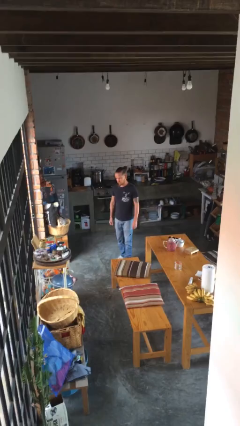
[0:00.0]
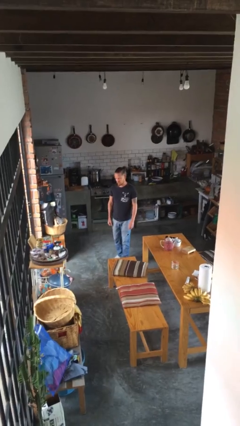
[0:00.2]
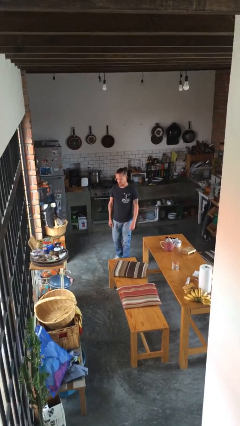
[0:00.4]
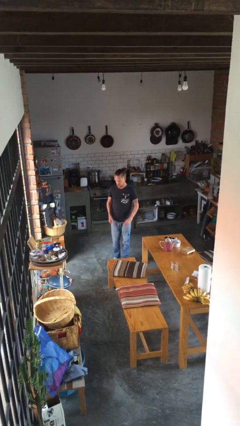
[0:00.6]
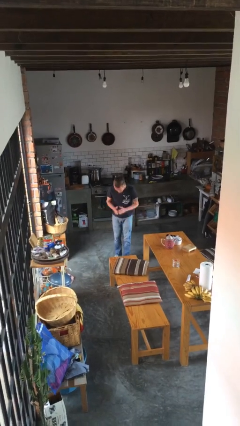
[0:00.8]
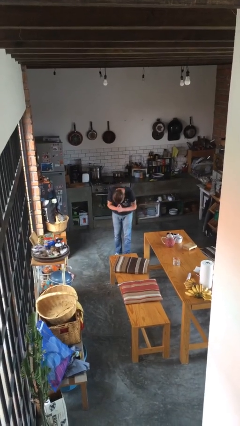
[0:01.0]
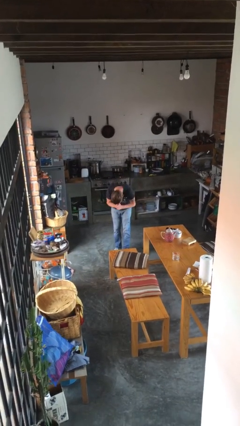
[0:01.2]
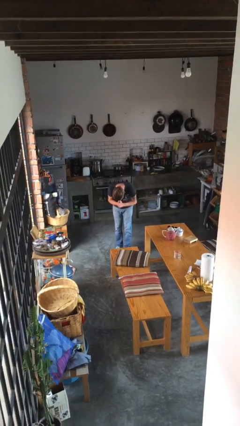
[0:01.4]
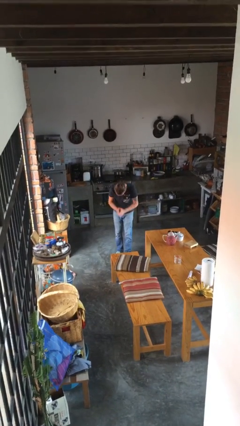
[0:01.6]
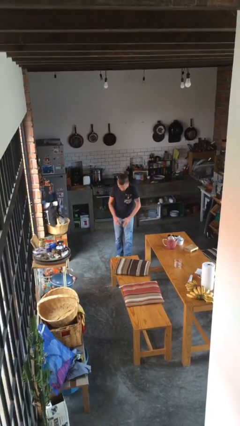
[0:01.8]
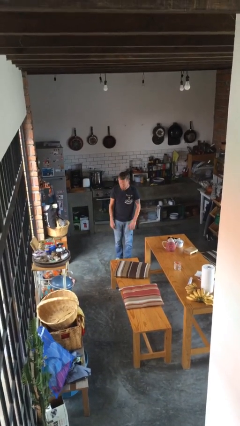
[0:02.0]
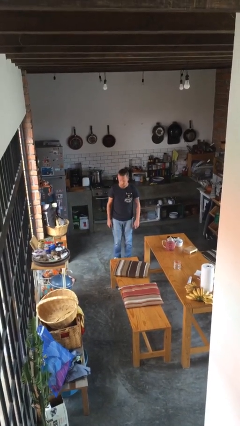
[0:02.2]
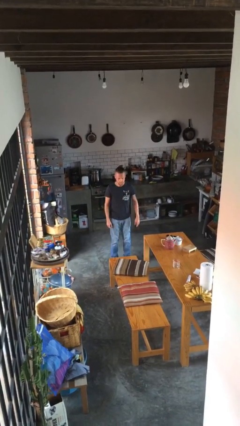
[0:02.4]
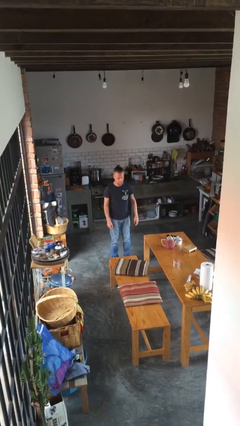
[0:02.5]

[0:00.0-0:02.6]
person bows

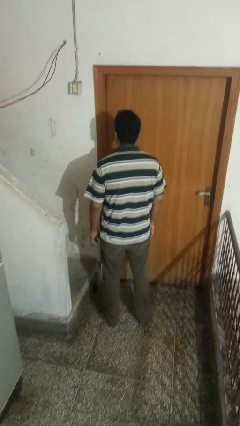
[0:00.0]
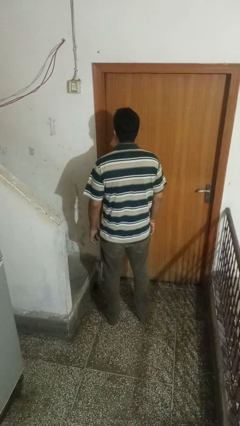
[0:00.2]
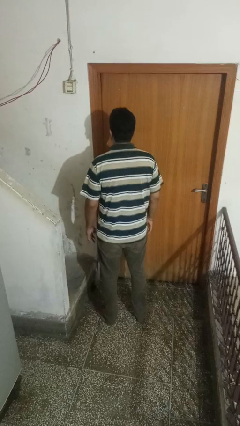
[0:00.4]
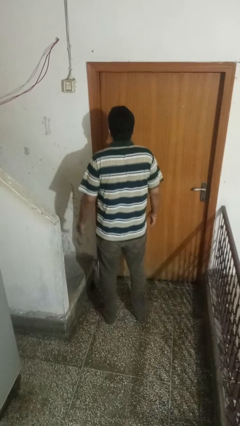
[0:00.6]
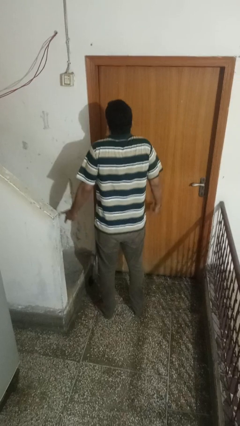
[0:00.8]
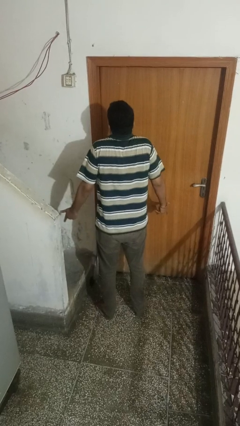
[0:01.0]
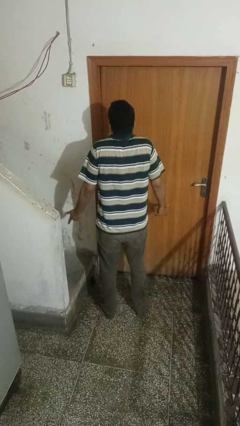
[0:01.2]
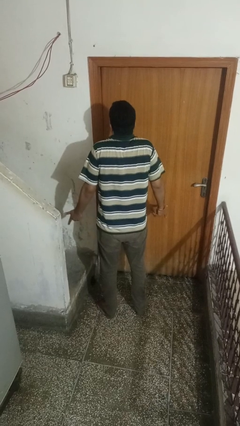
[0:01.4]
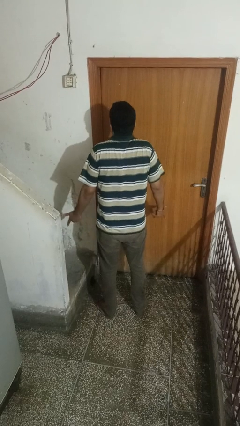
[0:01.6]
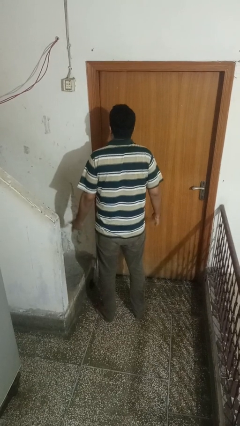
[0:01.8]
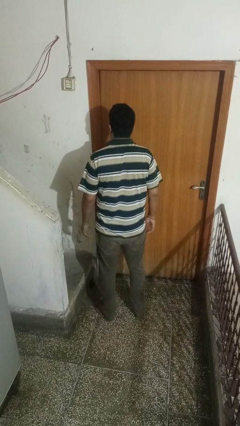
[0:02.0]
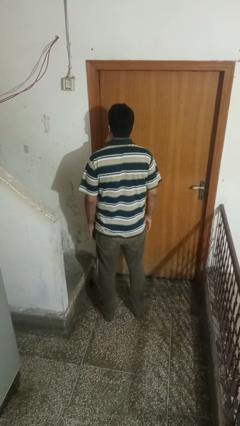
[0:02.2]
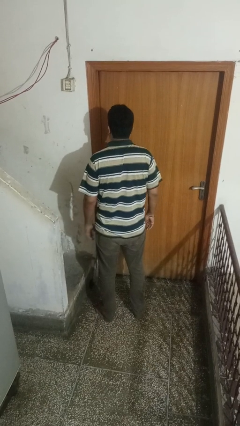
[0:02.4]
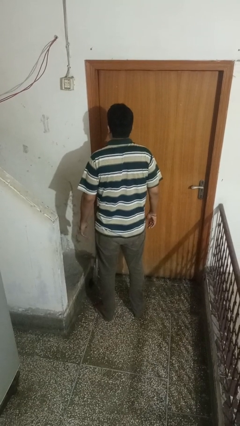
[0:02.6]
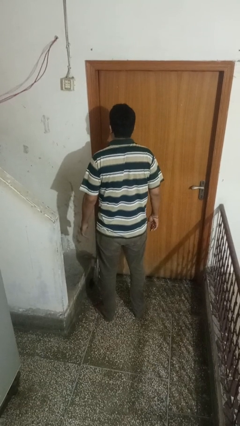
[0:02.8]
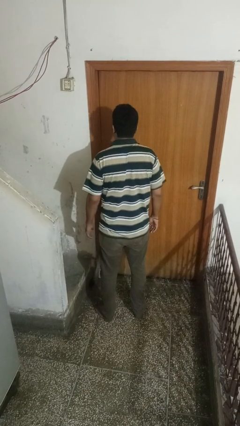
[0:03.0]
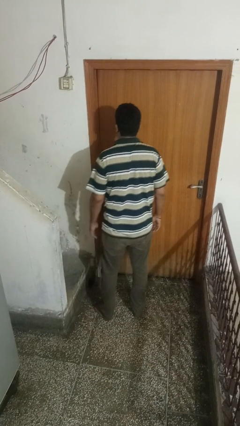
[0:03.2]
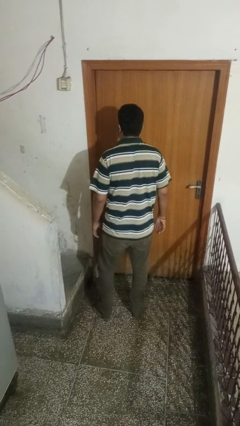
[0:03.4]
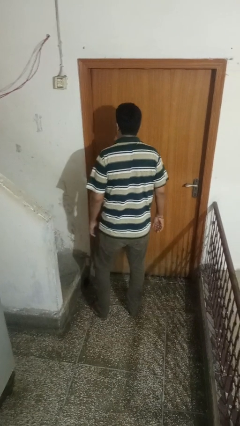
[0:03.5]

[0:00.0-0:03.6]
person shrugs

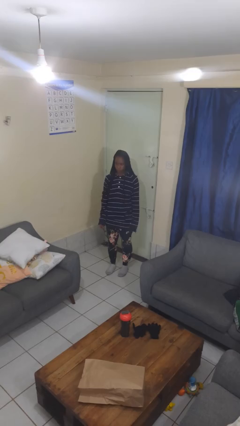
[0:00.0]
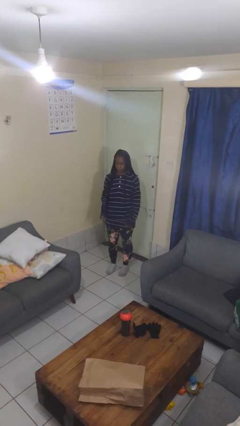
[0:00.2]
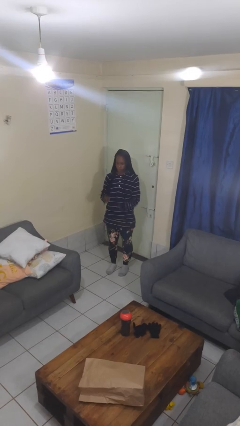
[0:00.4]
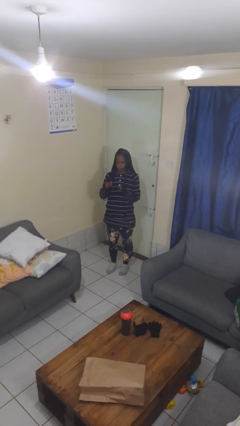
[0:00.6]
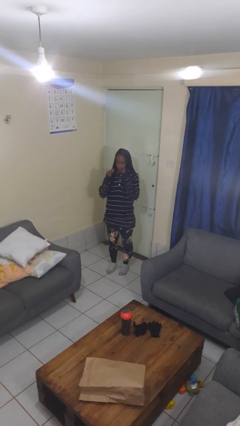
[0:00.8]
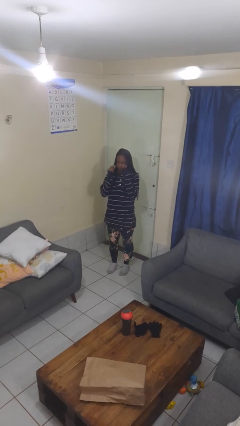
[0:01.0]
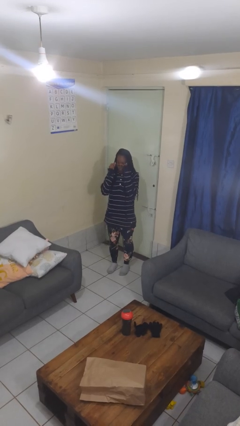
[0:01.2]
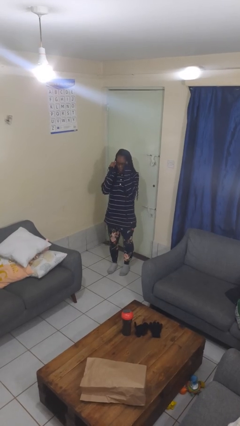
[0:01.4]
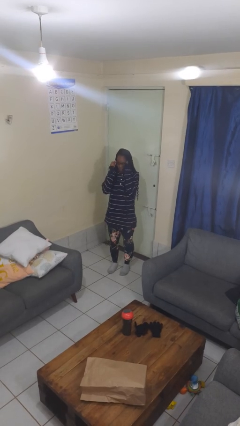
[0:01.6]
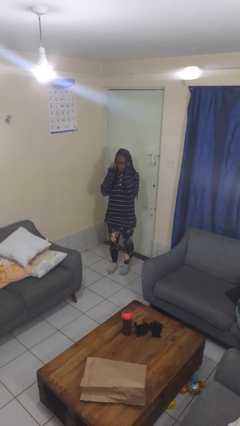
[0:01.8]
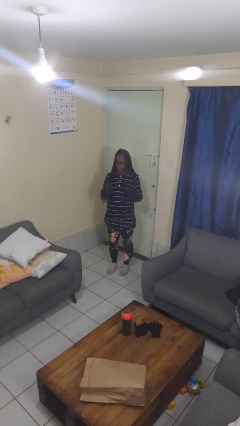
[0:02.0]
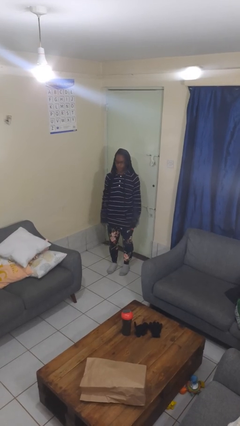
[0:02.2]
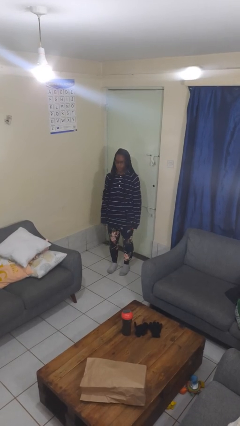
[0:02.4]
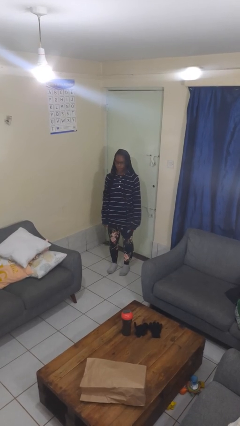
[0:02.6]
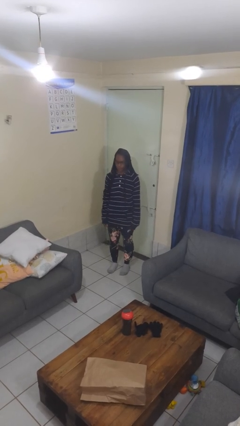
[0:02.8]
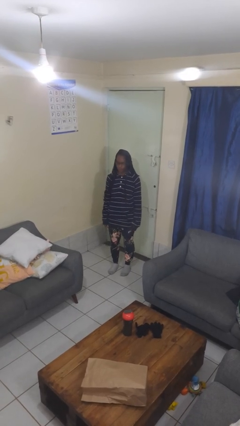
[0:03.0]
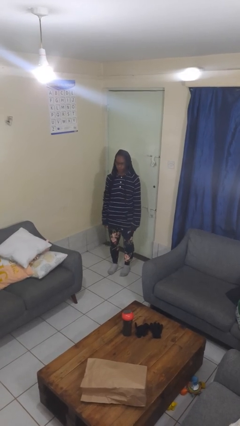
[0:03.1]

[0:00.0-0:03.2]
person puts on glasses

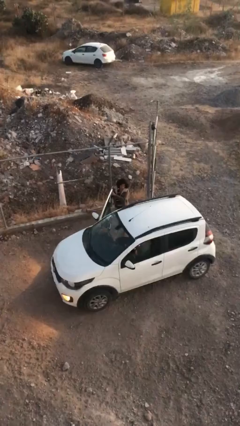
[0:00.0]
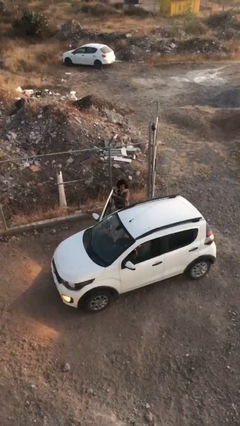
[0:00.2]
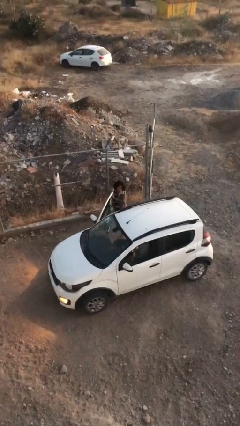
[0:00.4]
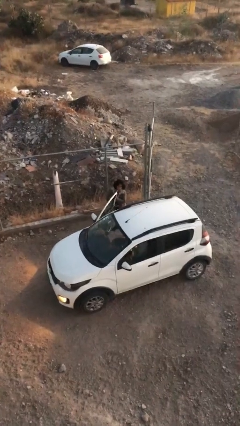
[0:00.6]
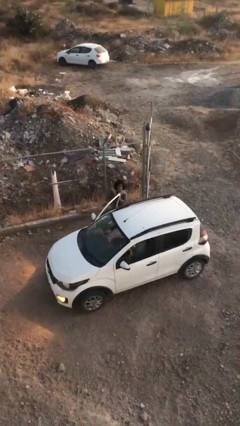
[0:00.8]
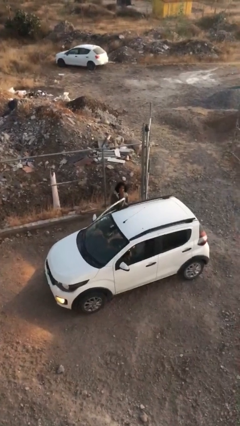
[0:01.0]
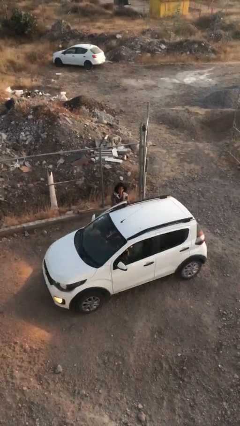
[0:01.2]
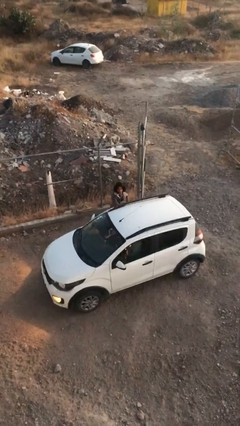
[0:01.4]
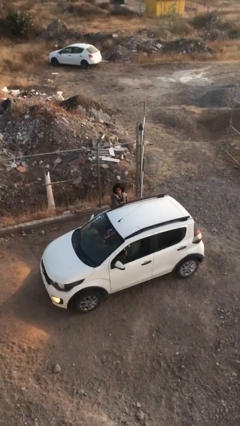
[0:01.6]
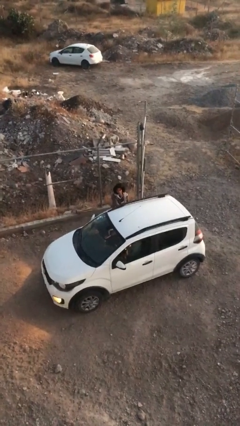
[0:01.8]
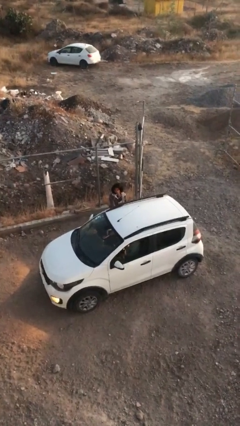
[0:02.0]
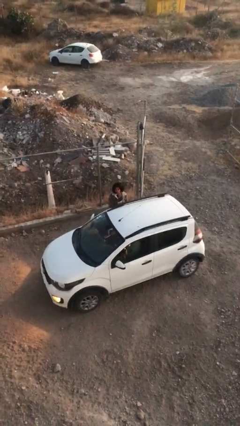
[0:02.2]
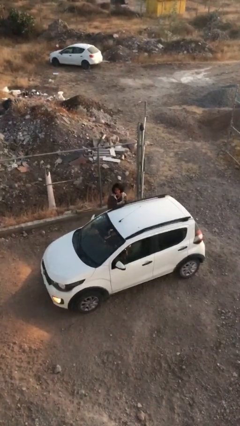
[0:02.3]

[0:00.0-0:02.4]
person closes car door

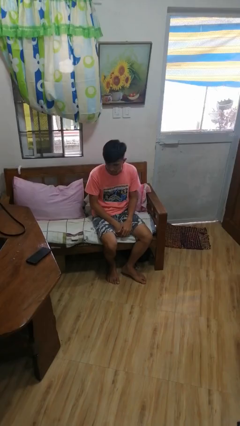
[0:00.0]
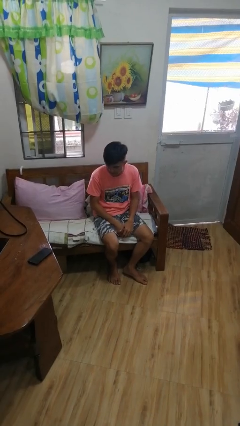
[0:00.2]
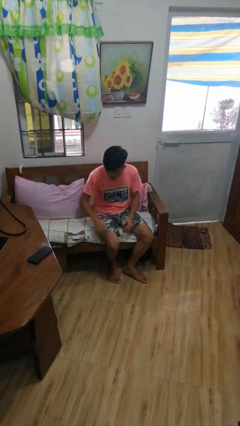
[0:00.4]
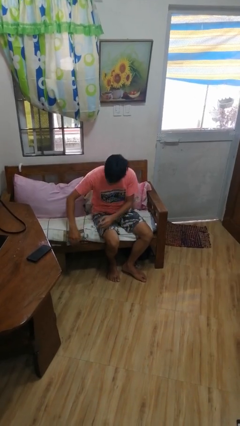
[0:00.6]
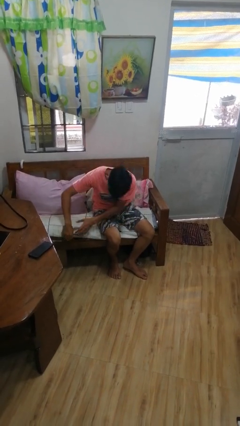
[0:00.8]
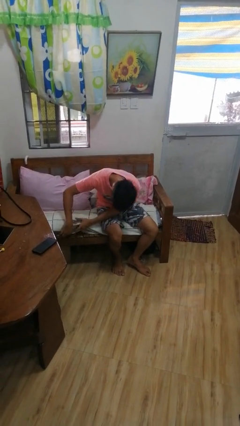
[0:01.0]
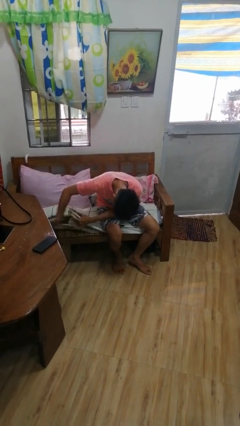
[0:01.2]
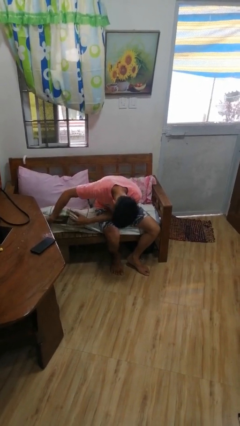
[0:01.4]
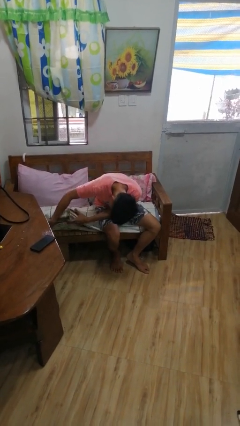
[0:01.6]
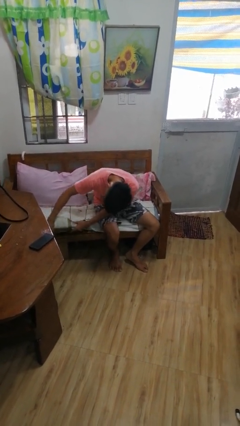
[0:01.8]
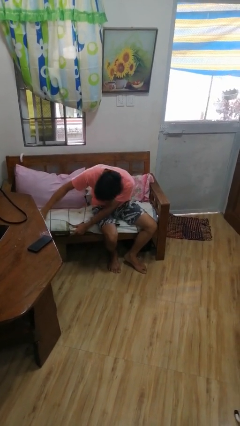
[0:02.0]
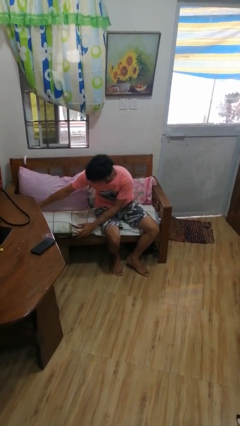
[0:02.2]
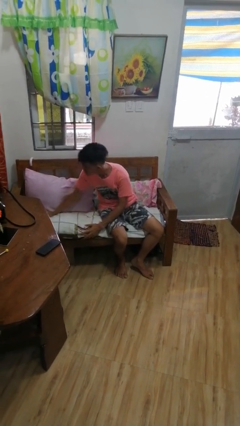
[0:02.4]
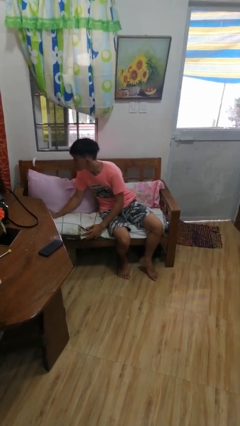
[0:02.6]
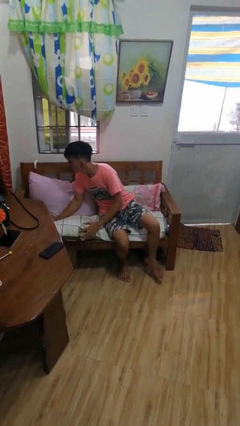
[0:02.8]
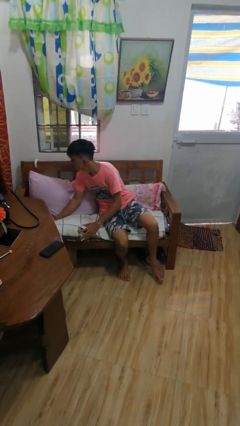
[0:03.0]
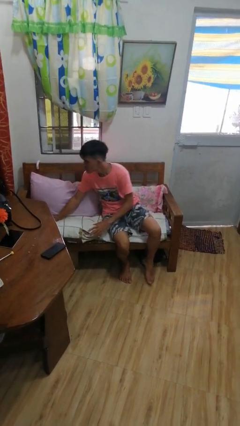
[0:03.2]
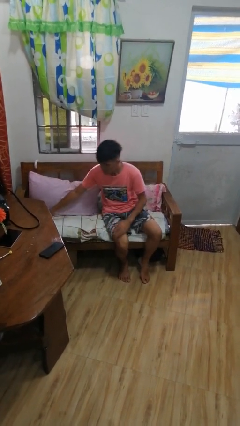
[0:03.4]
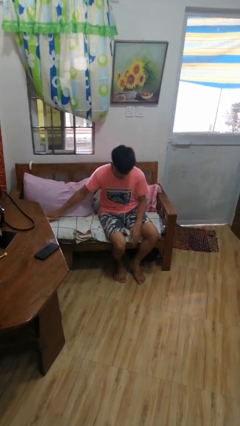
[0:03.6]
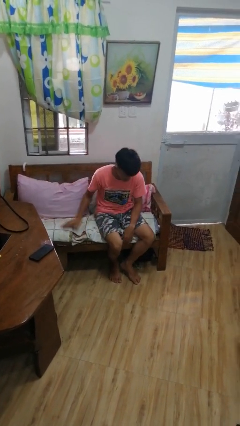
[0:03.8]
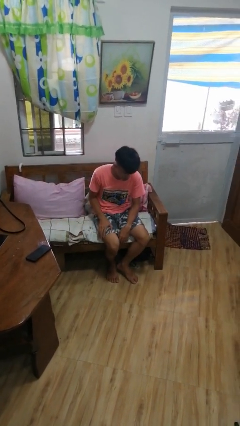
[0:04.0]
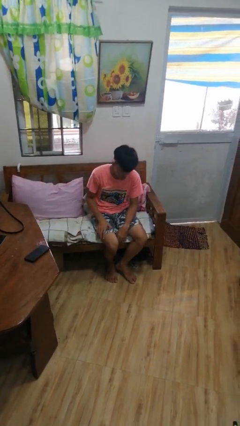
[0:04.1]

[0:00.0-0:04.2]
person searches in couch

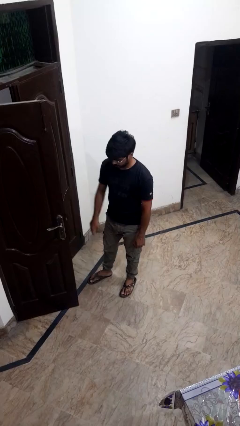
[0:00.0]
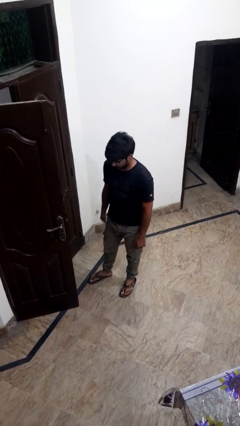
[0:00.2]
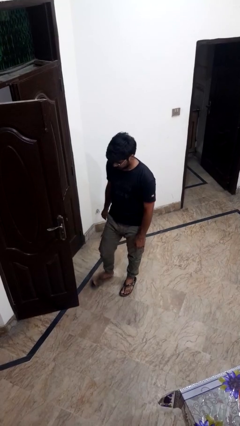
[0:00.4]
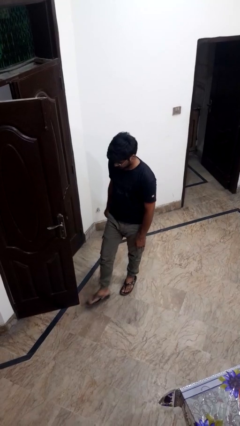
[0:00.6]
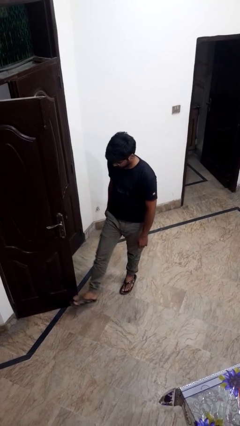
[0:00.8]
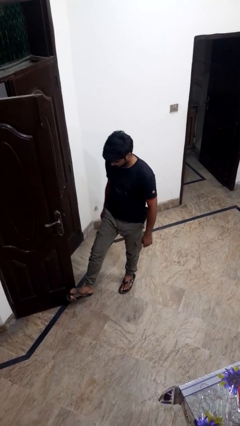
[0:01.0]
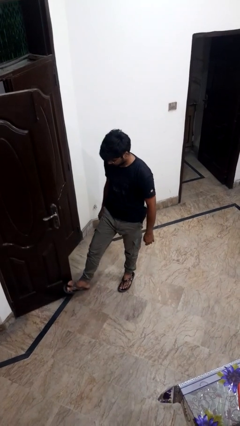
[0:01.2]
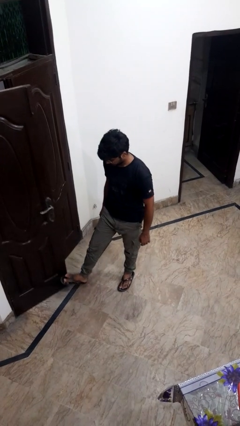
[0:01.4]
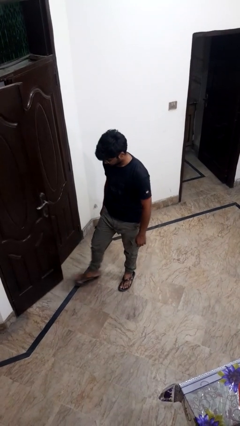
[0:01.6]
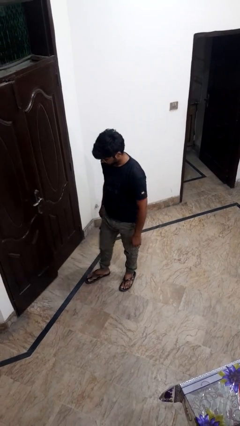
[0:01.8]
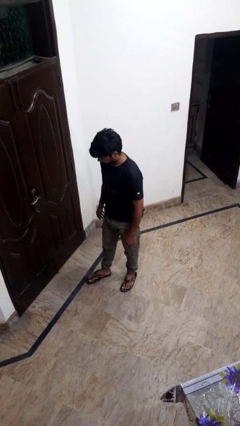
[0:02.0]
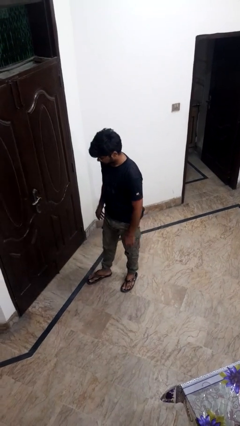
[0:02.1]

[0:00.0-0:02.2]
person closes door with foot
